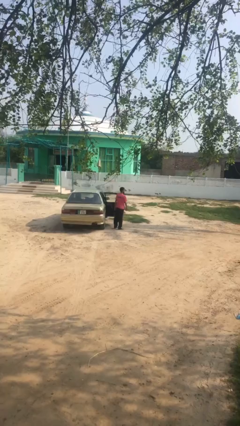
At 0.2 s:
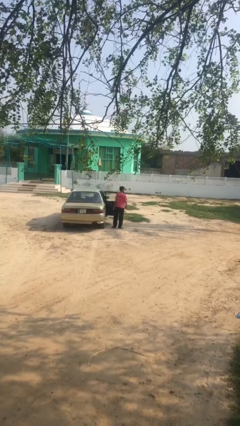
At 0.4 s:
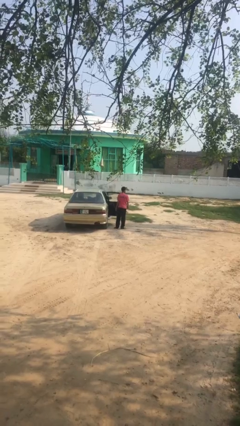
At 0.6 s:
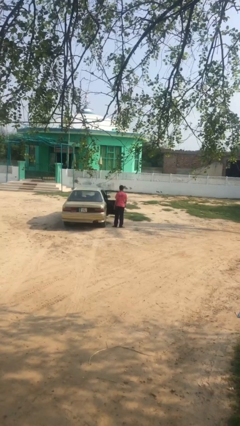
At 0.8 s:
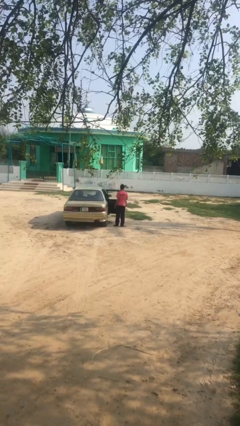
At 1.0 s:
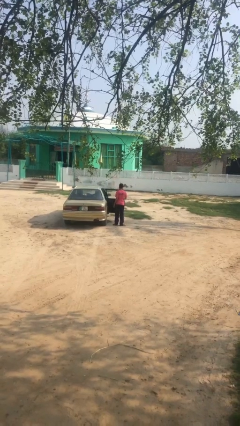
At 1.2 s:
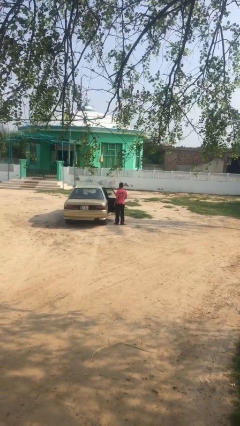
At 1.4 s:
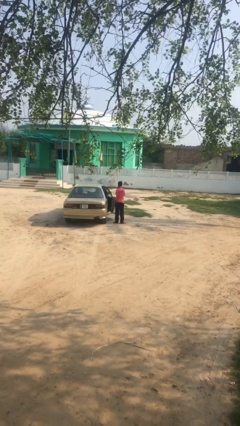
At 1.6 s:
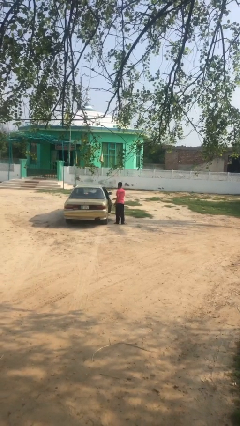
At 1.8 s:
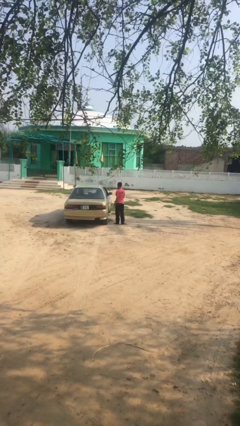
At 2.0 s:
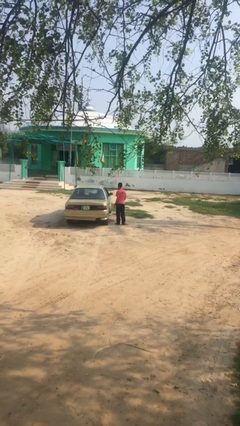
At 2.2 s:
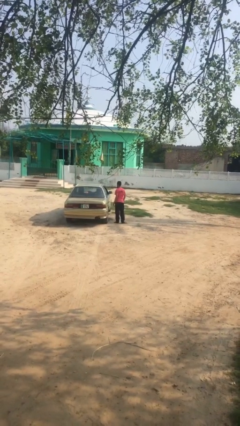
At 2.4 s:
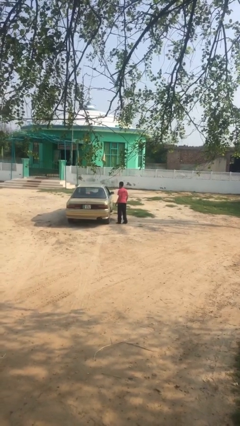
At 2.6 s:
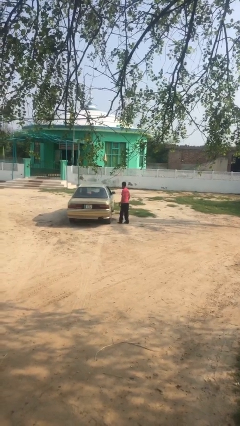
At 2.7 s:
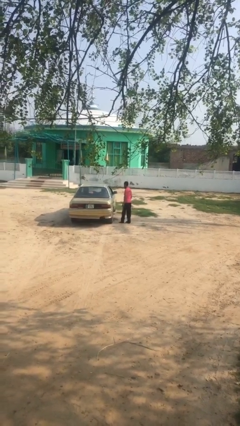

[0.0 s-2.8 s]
person closes car door

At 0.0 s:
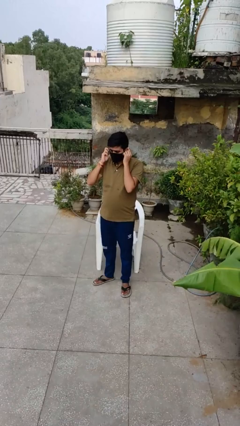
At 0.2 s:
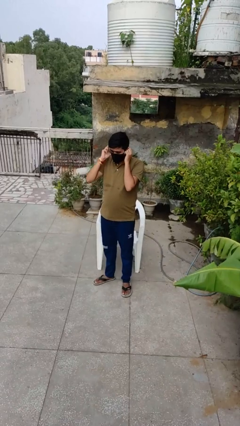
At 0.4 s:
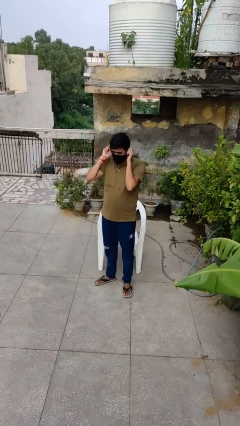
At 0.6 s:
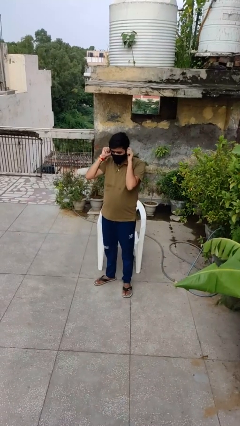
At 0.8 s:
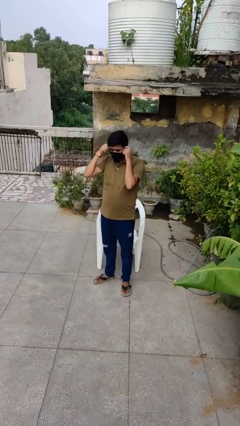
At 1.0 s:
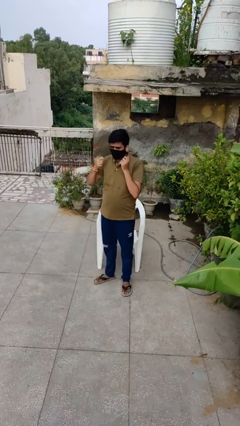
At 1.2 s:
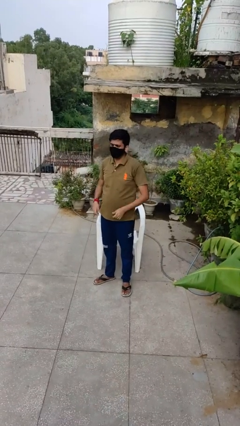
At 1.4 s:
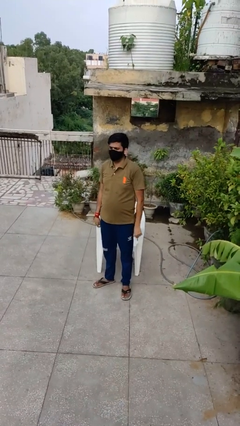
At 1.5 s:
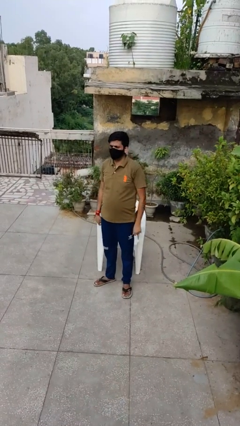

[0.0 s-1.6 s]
person puts on facemask

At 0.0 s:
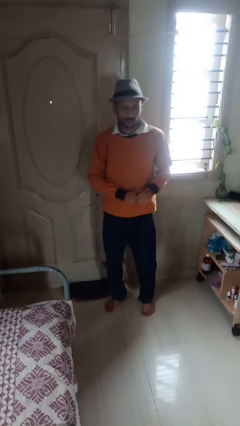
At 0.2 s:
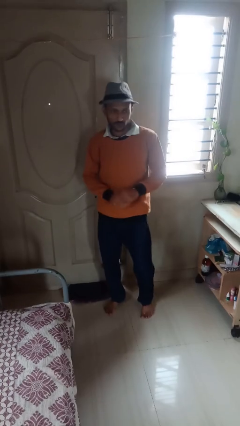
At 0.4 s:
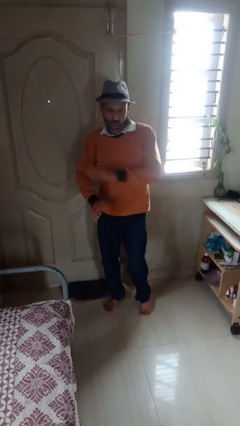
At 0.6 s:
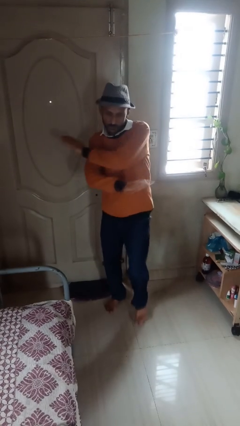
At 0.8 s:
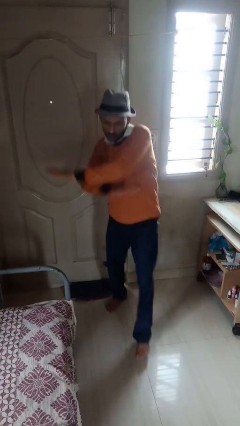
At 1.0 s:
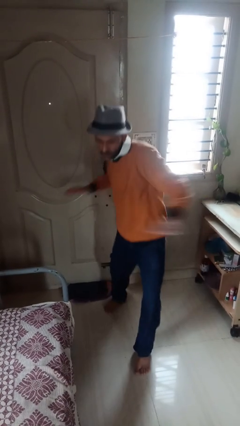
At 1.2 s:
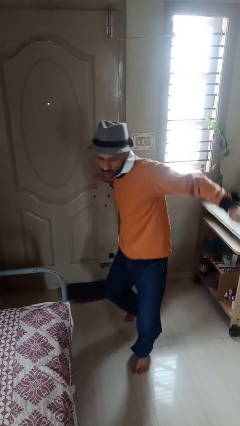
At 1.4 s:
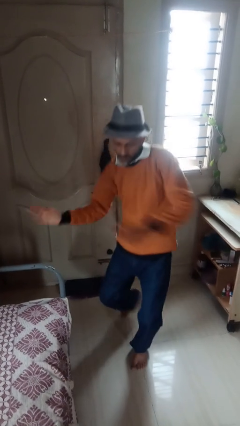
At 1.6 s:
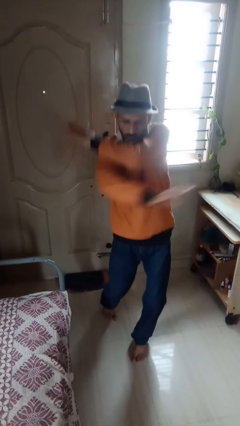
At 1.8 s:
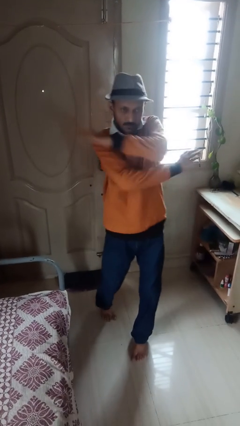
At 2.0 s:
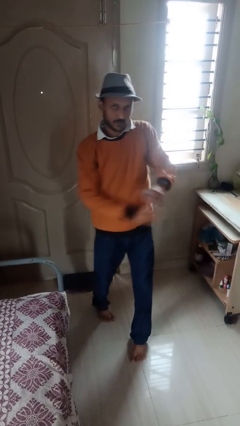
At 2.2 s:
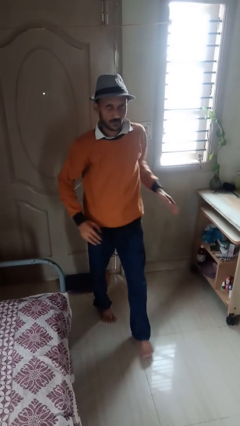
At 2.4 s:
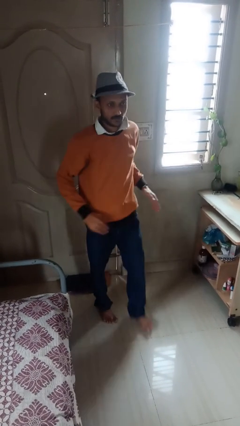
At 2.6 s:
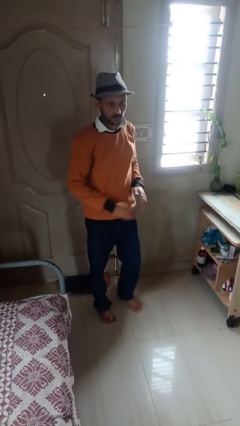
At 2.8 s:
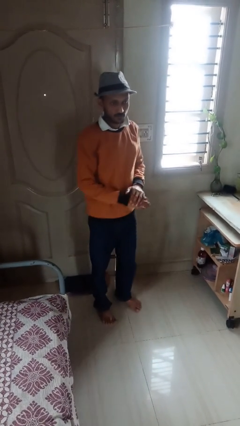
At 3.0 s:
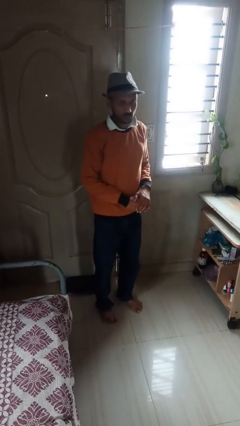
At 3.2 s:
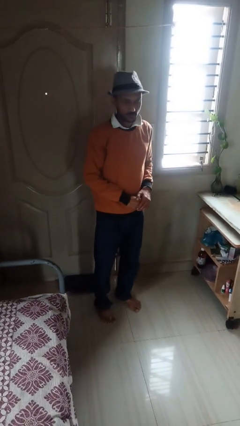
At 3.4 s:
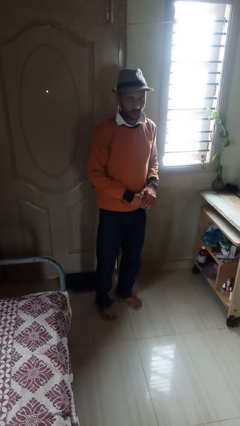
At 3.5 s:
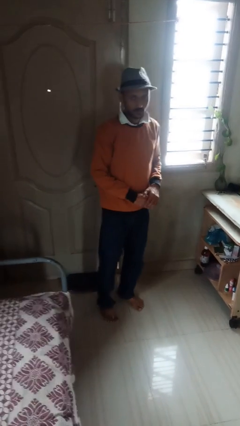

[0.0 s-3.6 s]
person karate chop

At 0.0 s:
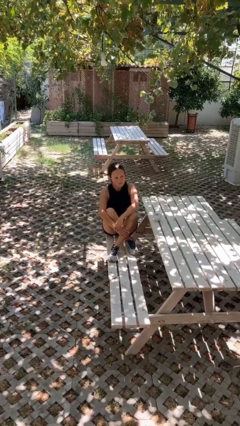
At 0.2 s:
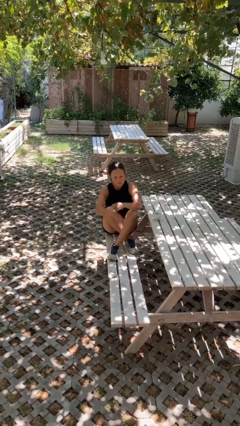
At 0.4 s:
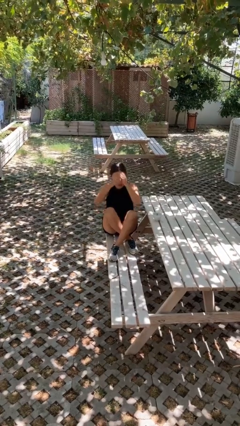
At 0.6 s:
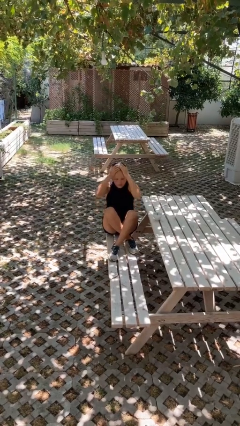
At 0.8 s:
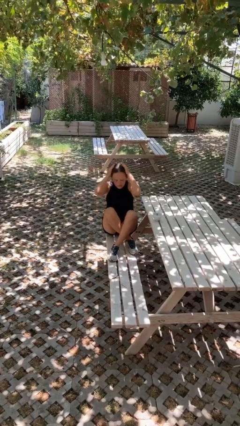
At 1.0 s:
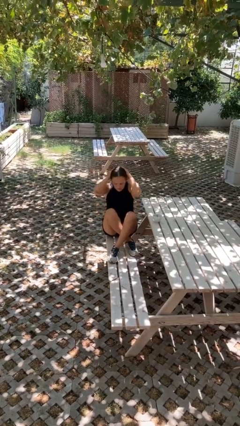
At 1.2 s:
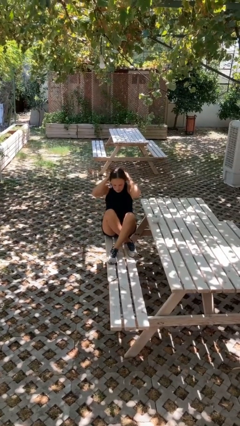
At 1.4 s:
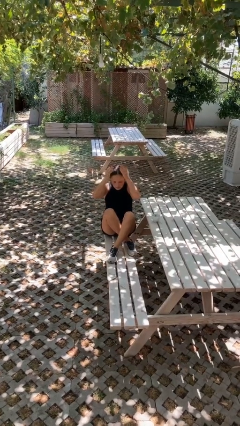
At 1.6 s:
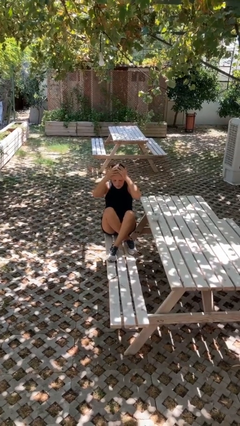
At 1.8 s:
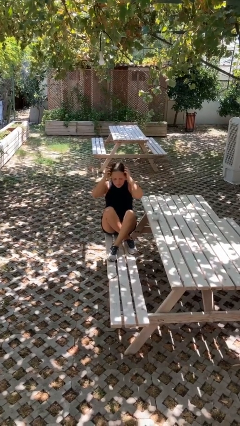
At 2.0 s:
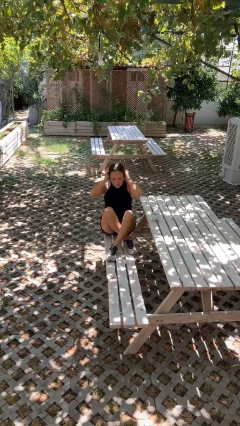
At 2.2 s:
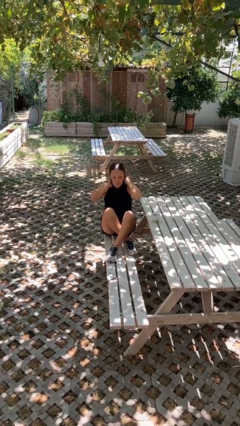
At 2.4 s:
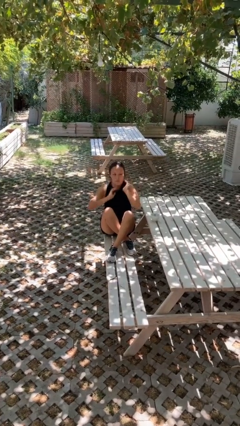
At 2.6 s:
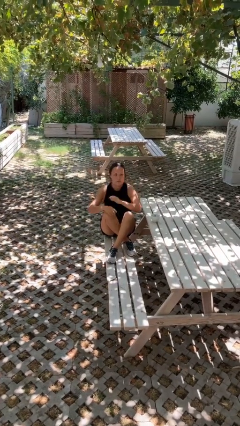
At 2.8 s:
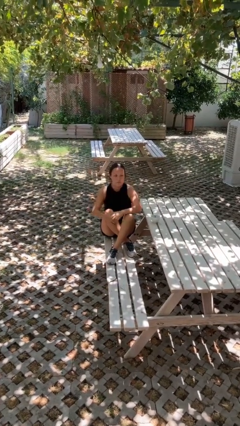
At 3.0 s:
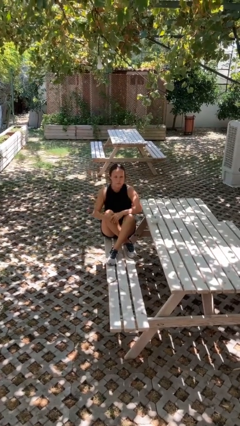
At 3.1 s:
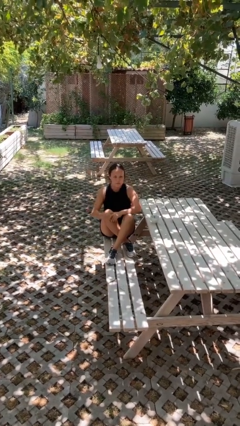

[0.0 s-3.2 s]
person strokes hair

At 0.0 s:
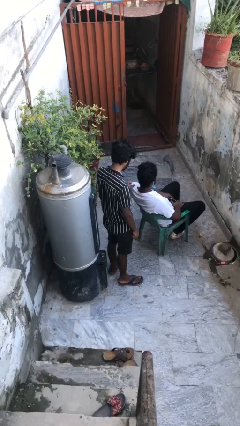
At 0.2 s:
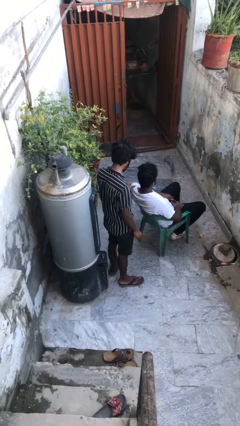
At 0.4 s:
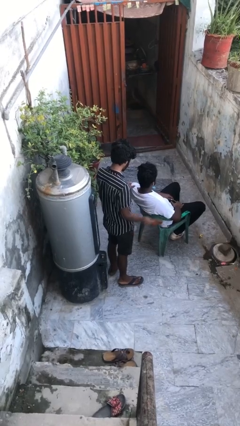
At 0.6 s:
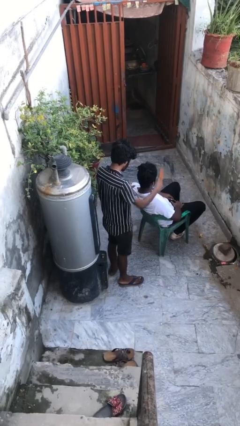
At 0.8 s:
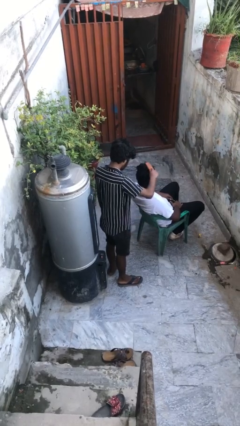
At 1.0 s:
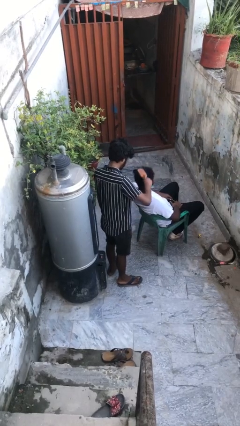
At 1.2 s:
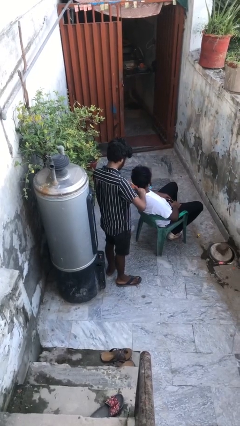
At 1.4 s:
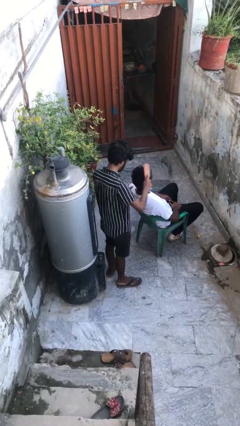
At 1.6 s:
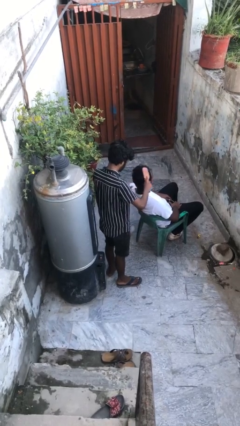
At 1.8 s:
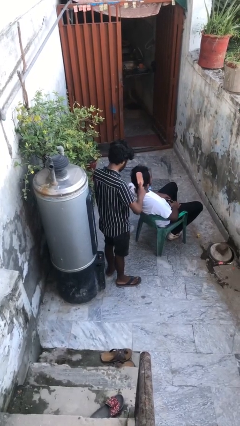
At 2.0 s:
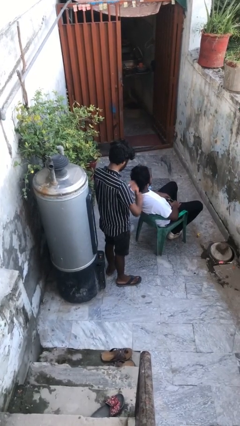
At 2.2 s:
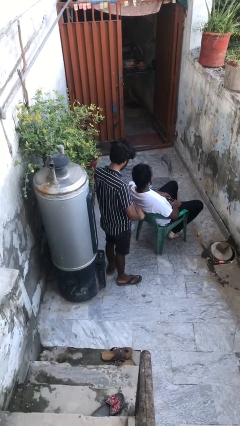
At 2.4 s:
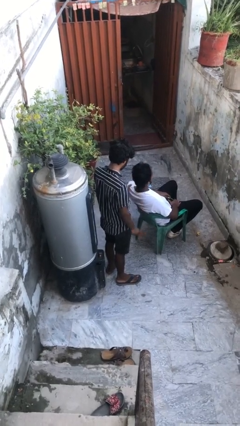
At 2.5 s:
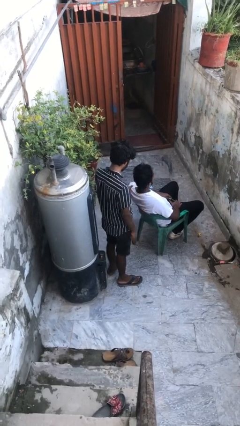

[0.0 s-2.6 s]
person brushes hair of person

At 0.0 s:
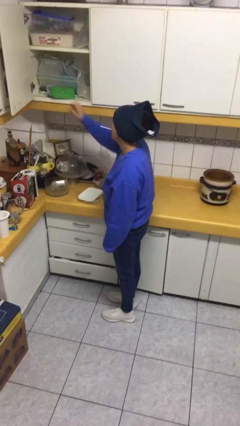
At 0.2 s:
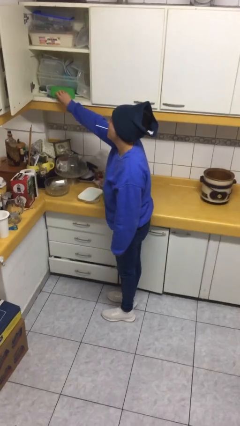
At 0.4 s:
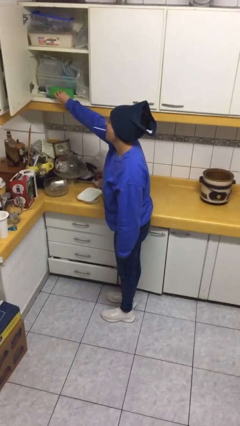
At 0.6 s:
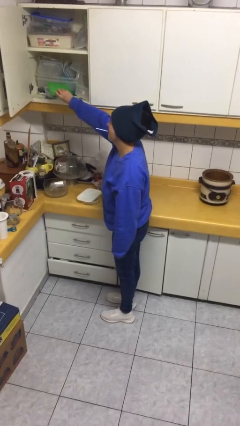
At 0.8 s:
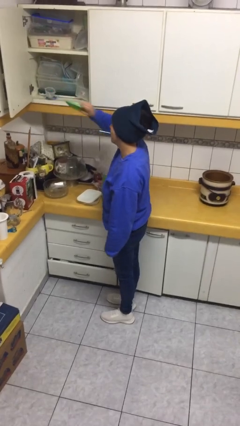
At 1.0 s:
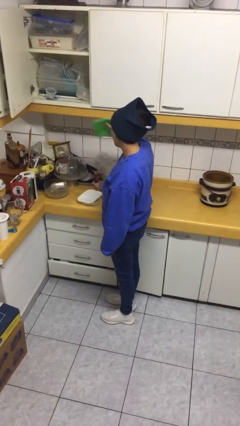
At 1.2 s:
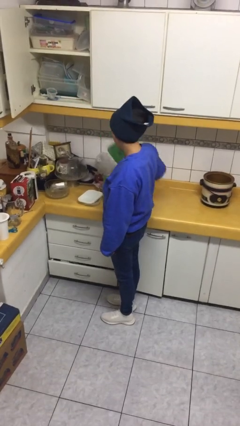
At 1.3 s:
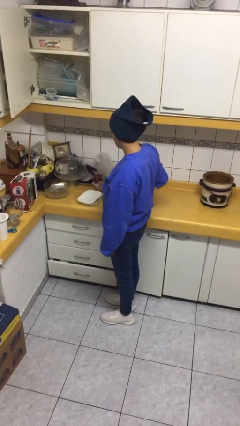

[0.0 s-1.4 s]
person takes object from cabinet

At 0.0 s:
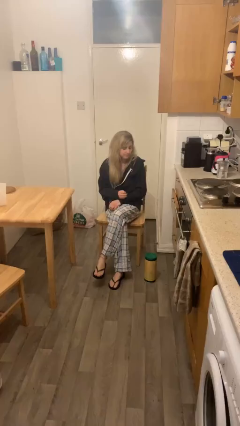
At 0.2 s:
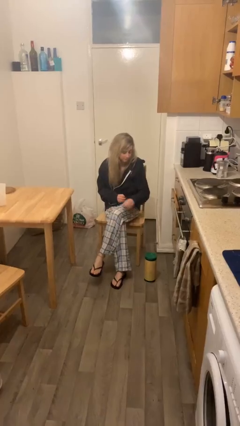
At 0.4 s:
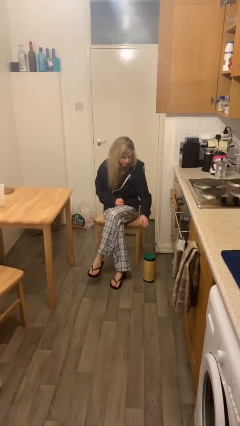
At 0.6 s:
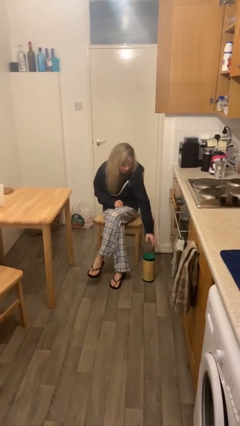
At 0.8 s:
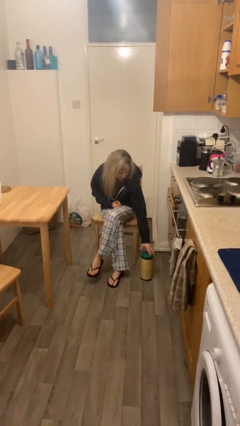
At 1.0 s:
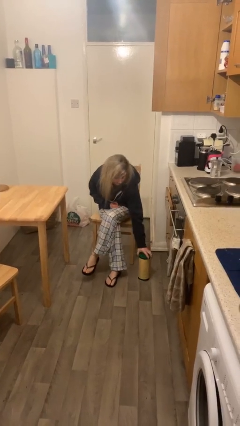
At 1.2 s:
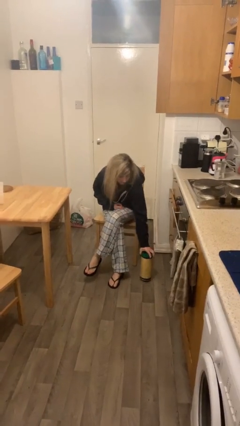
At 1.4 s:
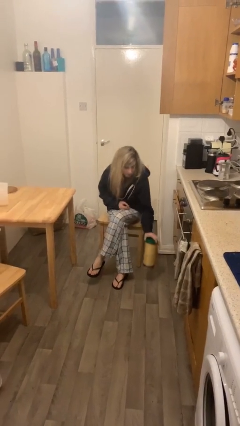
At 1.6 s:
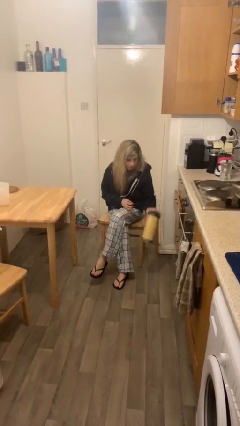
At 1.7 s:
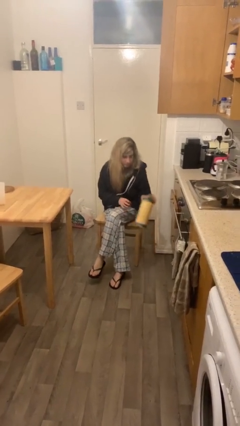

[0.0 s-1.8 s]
person picks up object from floor
